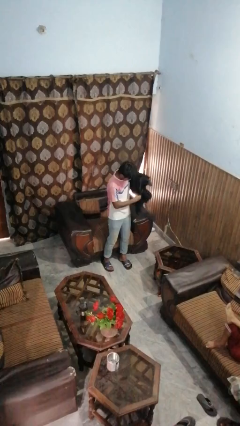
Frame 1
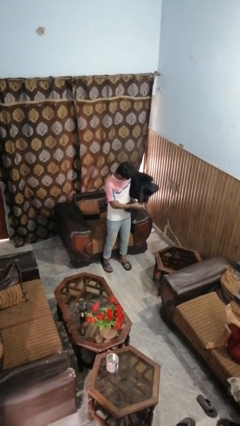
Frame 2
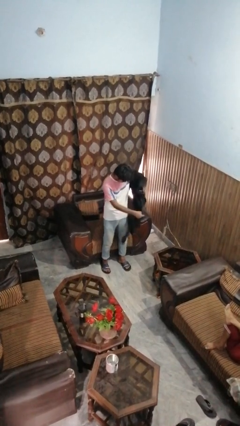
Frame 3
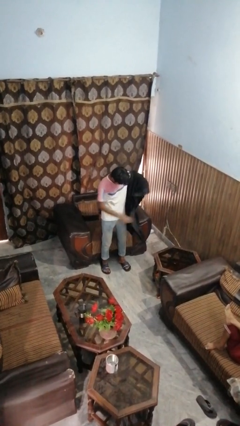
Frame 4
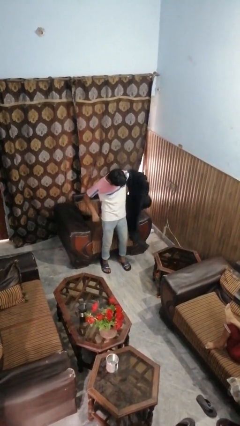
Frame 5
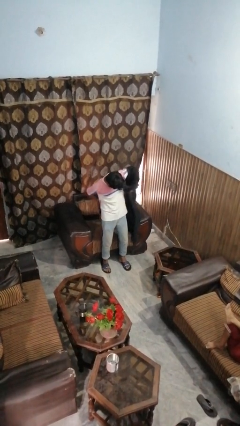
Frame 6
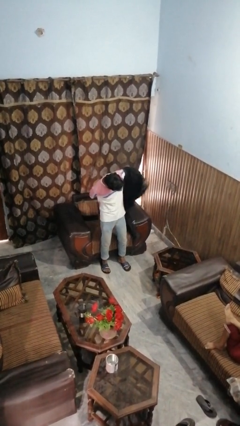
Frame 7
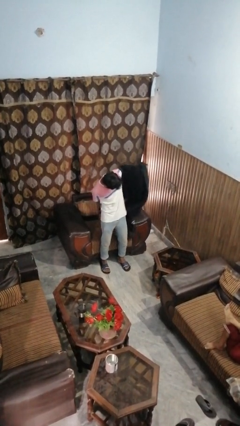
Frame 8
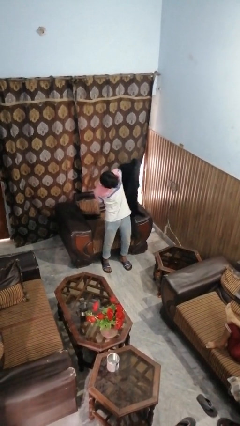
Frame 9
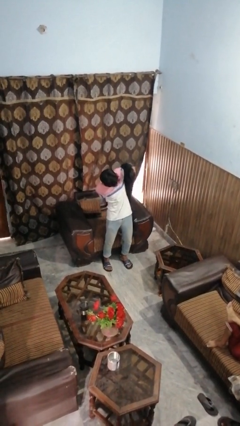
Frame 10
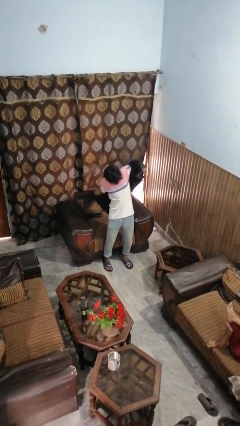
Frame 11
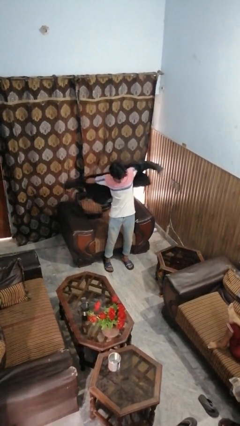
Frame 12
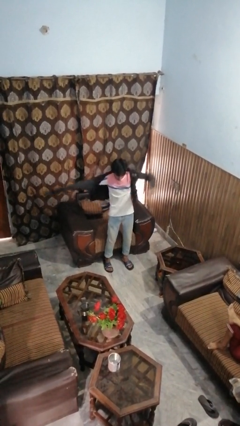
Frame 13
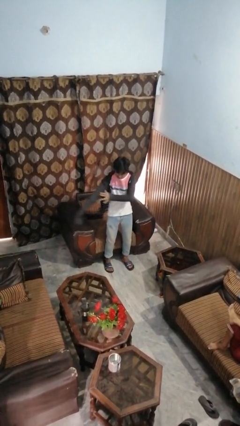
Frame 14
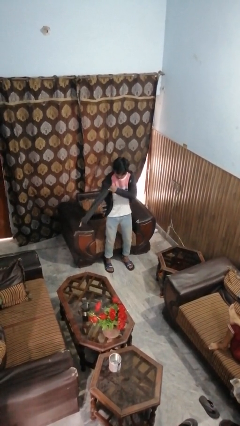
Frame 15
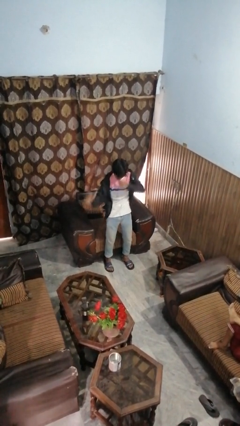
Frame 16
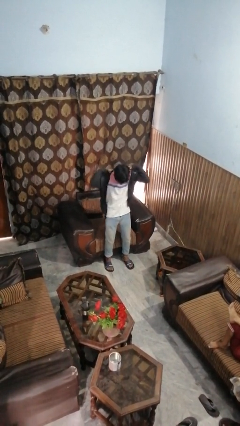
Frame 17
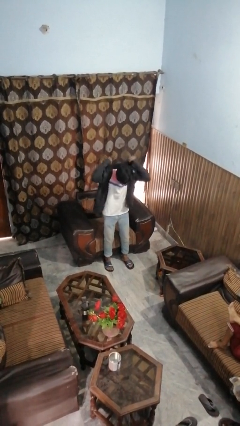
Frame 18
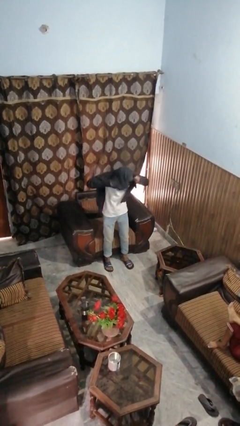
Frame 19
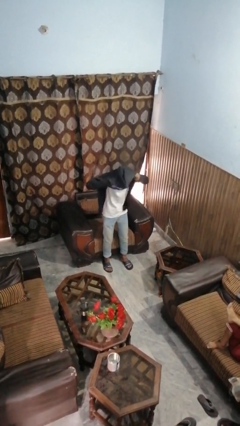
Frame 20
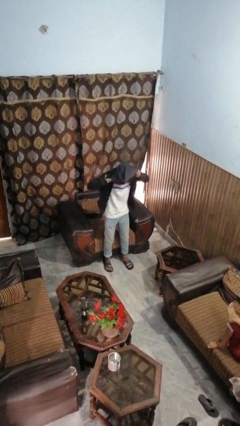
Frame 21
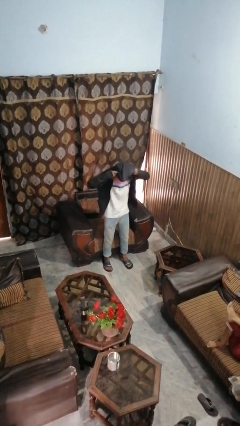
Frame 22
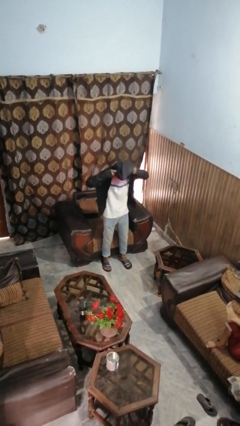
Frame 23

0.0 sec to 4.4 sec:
person puts on hoodie

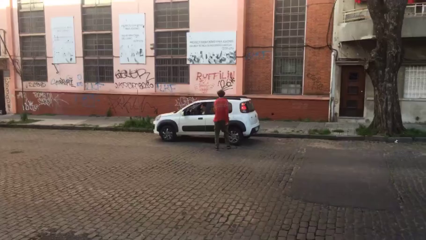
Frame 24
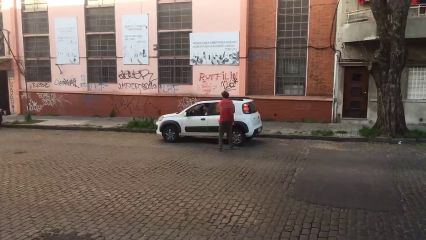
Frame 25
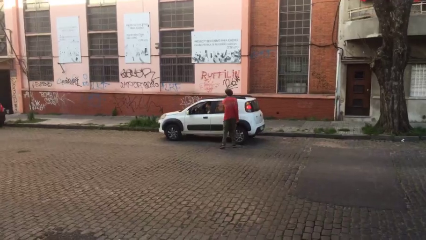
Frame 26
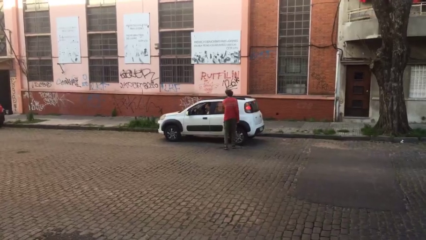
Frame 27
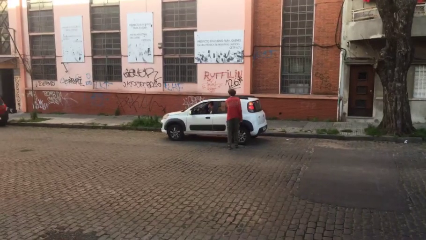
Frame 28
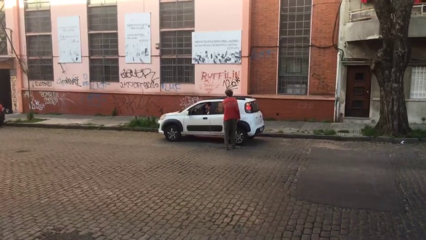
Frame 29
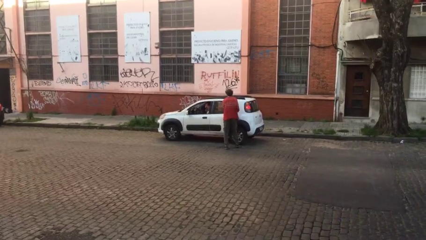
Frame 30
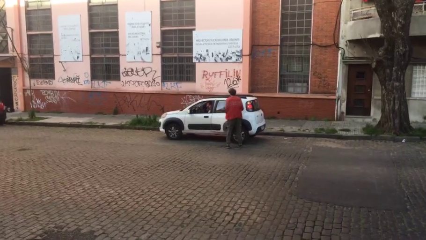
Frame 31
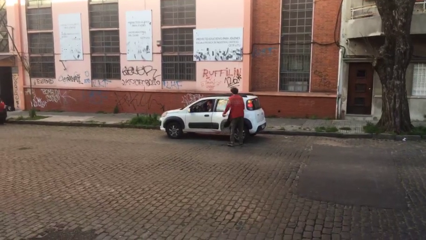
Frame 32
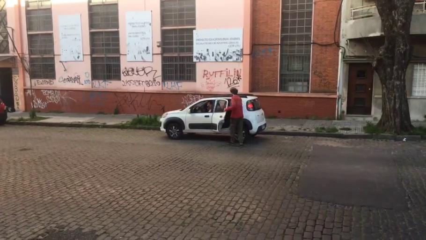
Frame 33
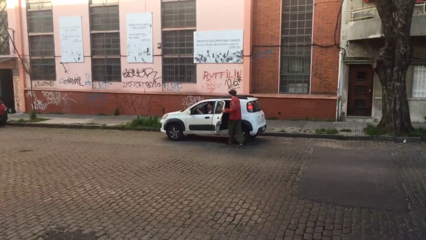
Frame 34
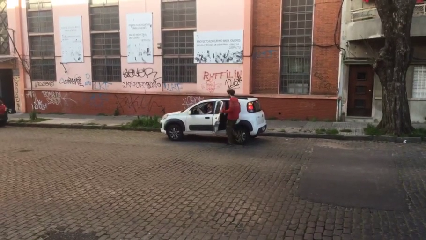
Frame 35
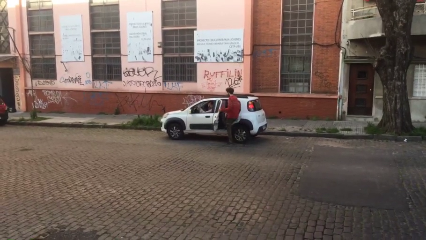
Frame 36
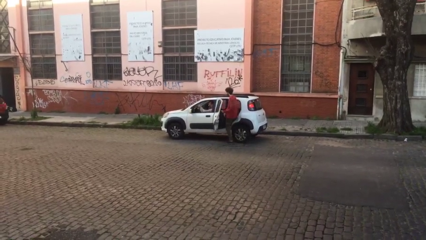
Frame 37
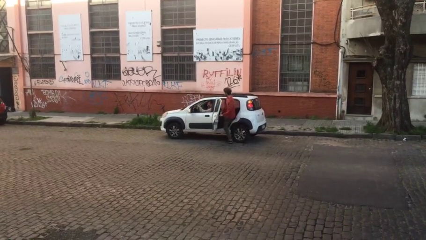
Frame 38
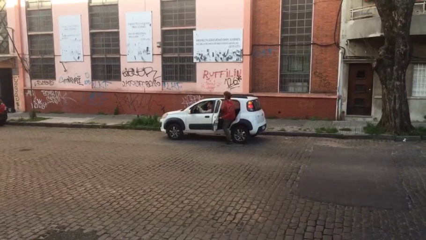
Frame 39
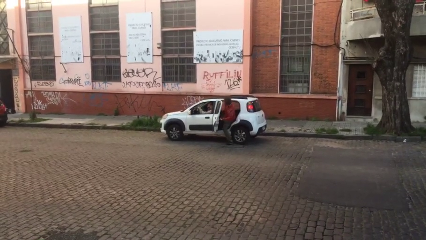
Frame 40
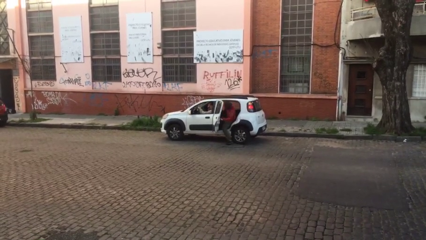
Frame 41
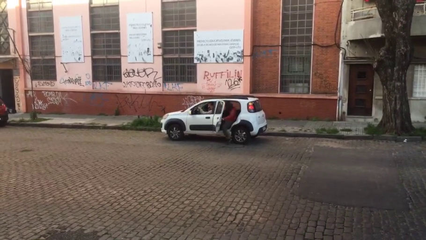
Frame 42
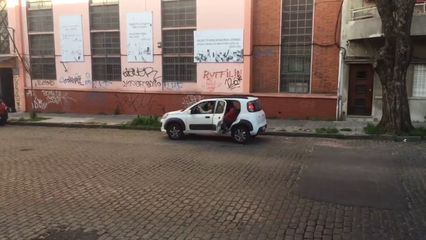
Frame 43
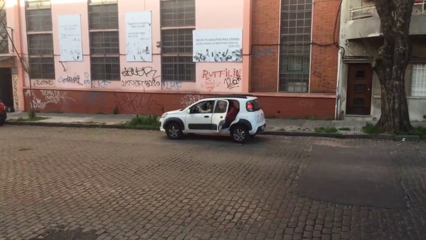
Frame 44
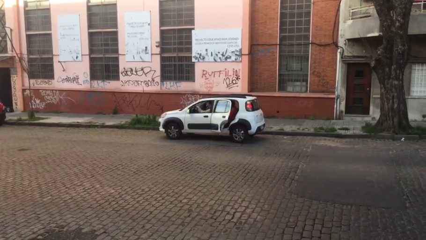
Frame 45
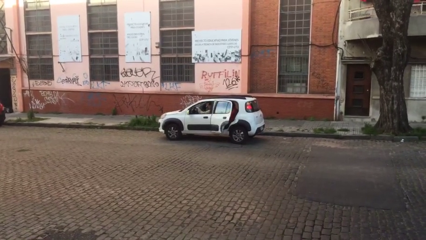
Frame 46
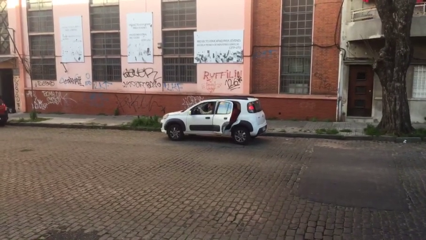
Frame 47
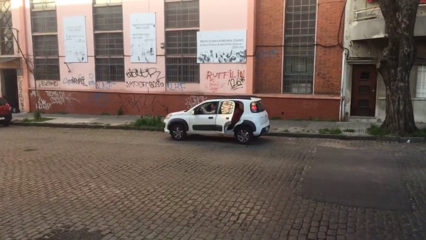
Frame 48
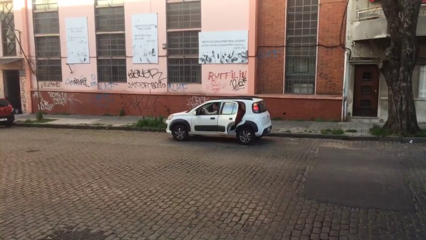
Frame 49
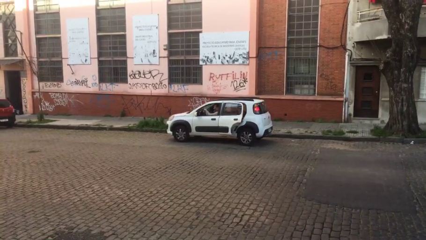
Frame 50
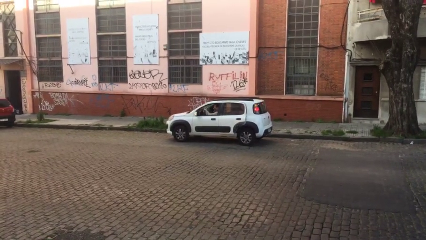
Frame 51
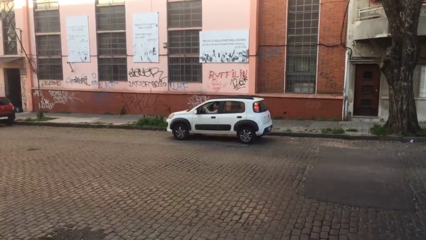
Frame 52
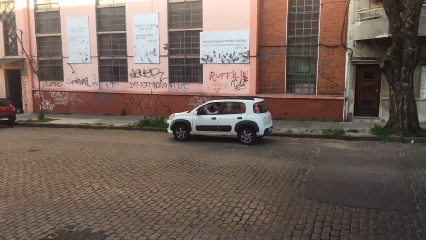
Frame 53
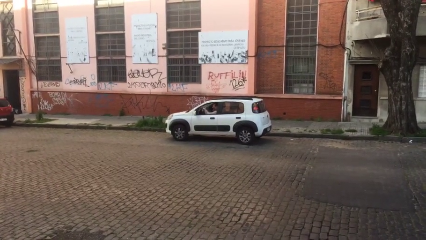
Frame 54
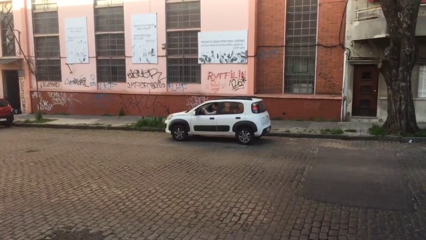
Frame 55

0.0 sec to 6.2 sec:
car picks up person

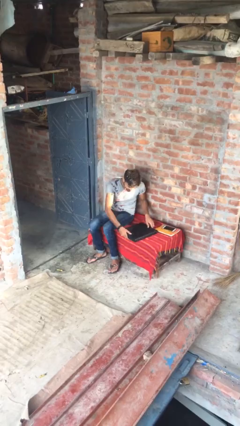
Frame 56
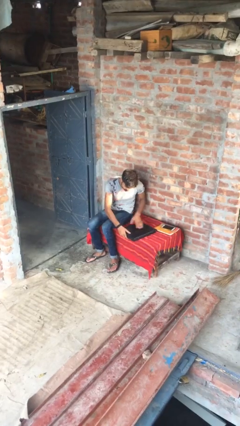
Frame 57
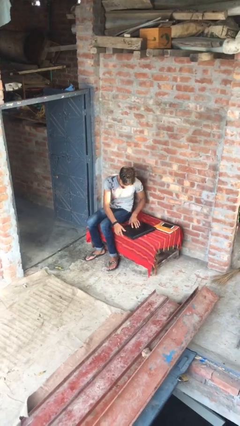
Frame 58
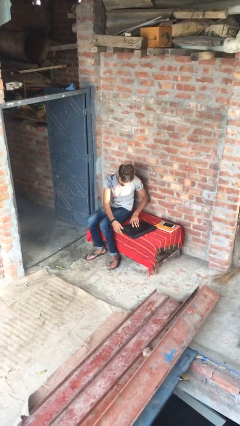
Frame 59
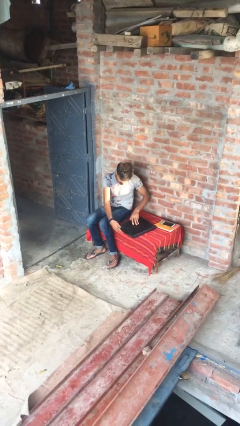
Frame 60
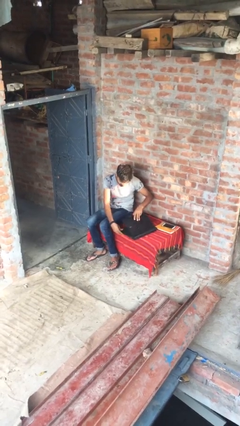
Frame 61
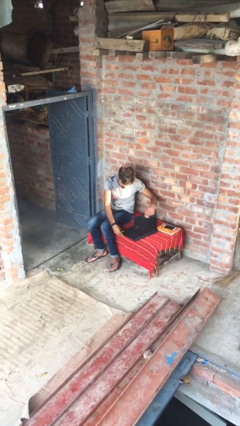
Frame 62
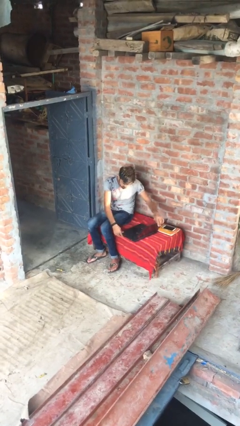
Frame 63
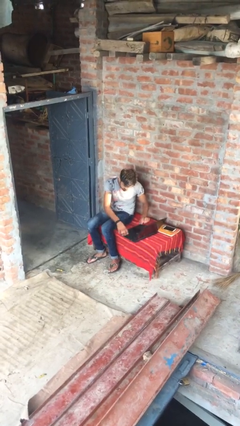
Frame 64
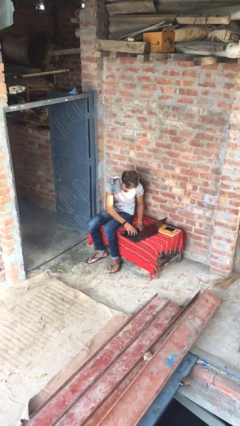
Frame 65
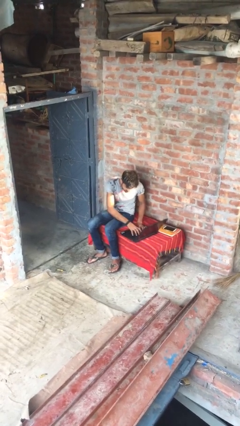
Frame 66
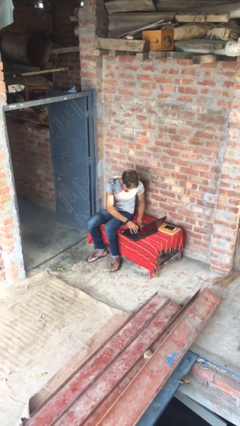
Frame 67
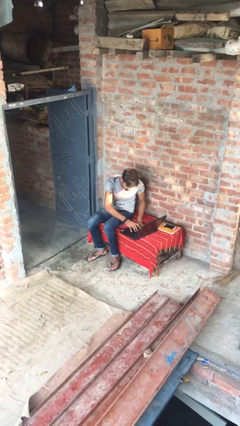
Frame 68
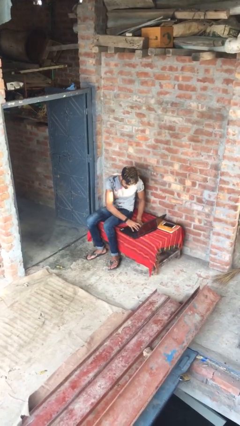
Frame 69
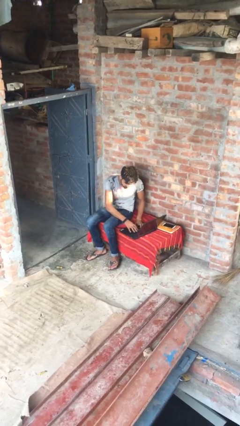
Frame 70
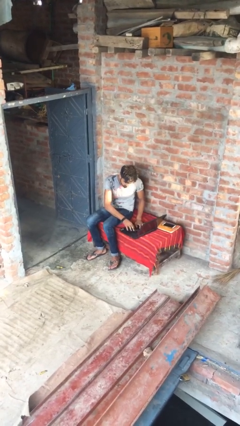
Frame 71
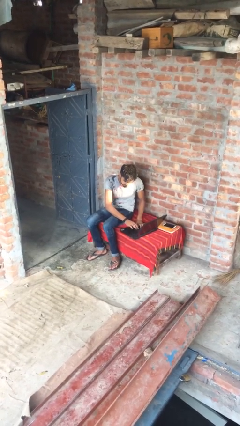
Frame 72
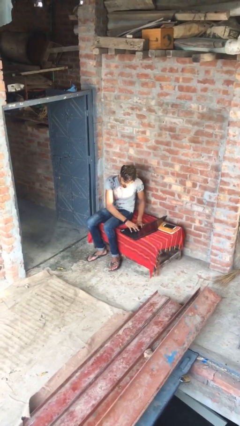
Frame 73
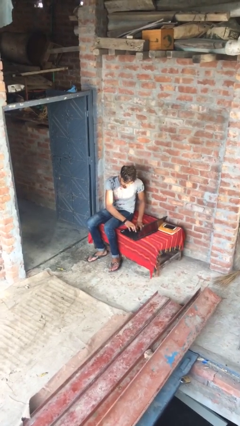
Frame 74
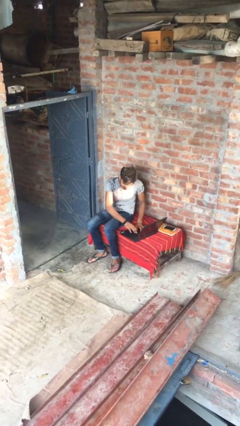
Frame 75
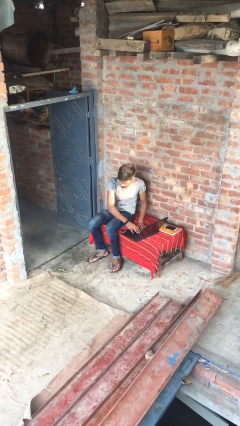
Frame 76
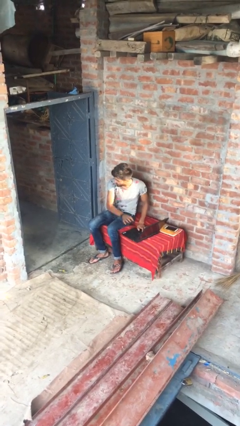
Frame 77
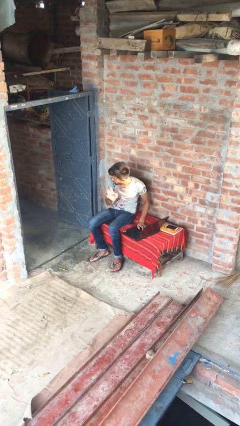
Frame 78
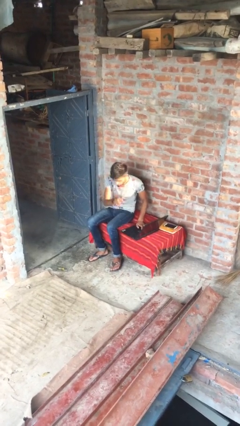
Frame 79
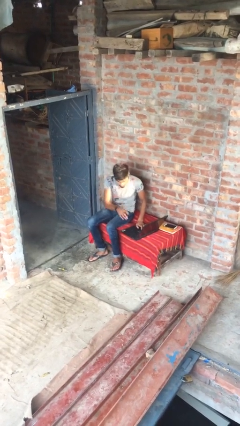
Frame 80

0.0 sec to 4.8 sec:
person interacts with laptop

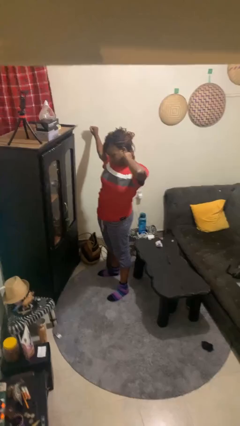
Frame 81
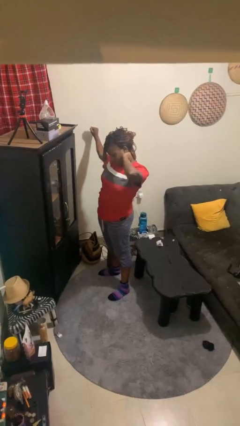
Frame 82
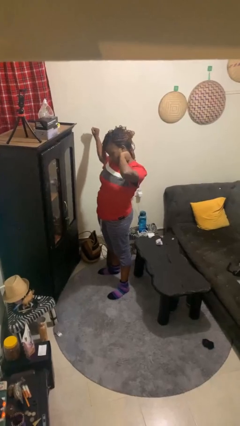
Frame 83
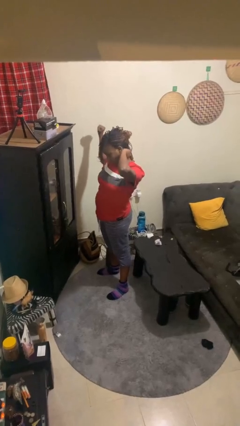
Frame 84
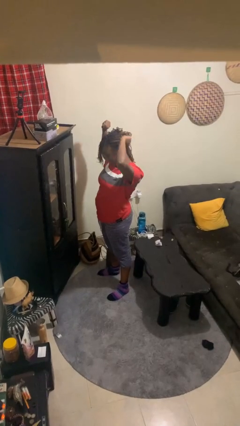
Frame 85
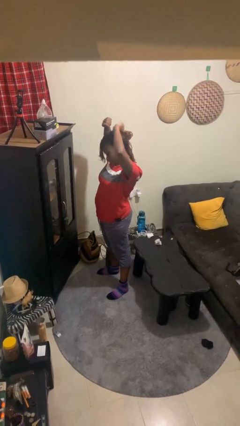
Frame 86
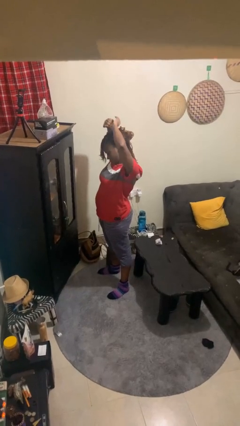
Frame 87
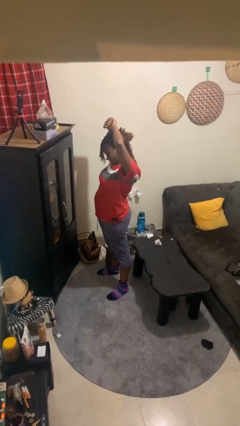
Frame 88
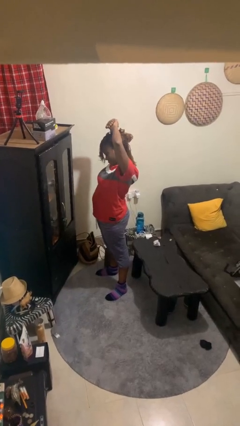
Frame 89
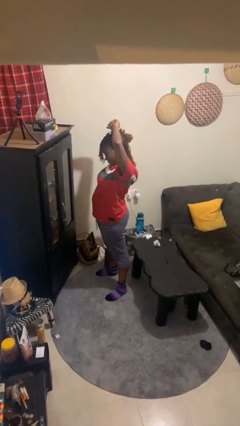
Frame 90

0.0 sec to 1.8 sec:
person stretches arms over head

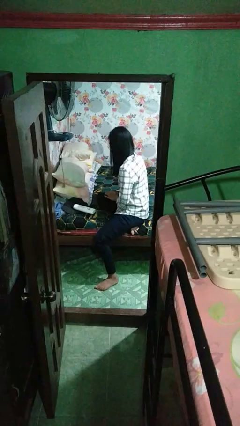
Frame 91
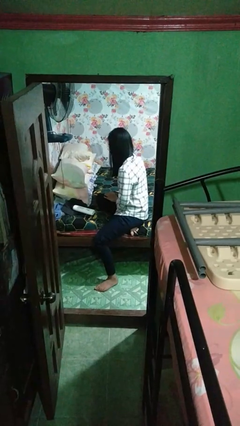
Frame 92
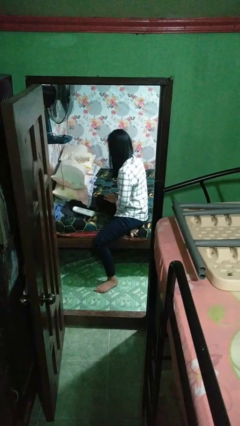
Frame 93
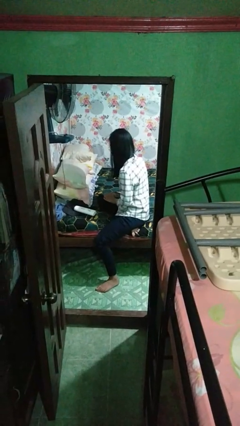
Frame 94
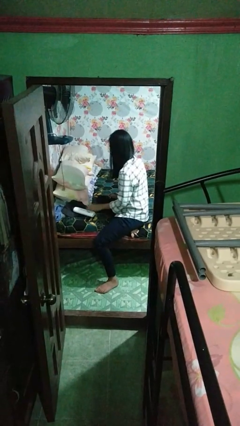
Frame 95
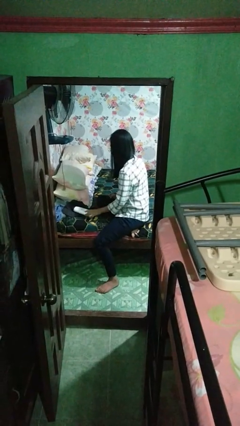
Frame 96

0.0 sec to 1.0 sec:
person picks up object from bed
